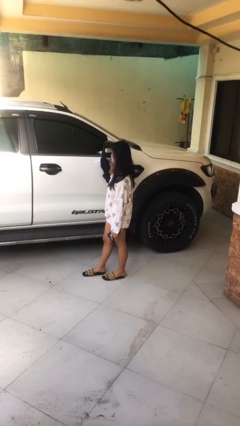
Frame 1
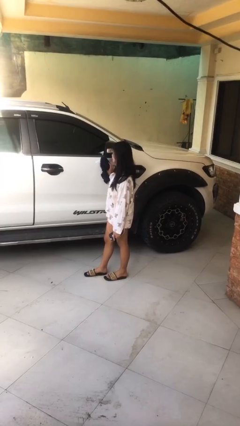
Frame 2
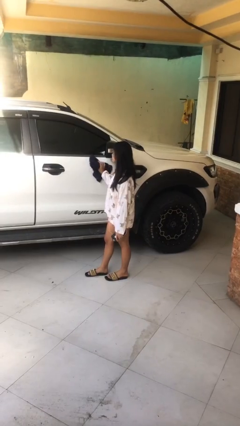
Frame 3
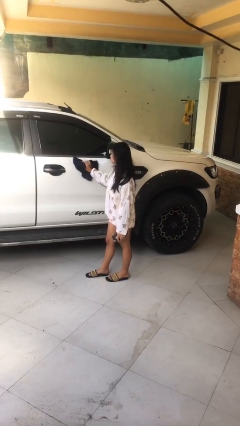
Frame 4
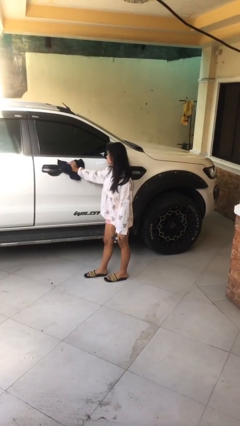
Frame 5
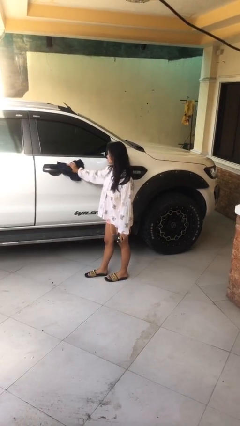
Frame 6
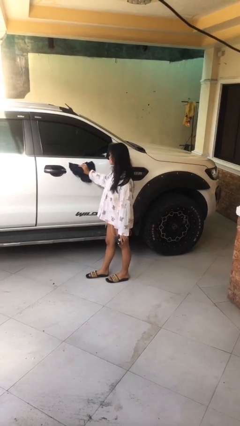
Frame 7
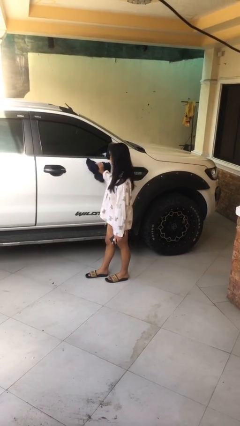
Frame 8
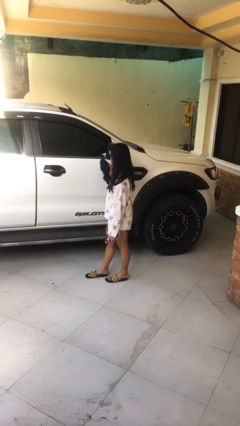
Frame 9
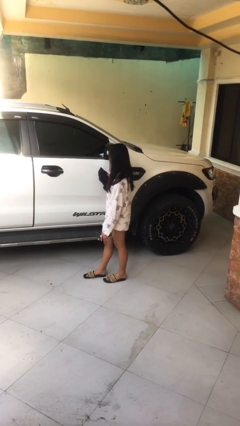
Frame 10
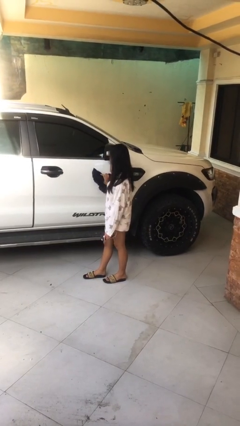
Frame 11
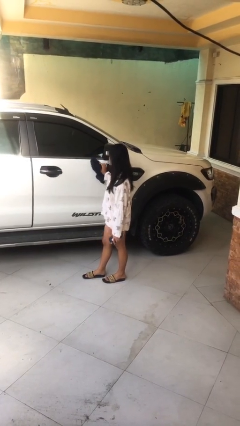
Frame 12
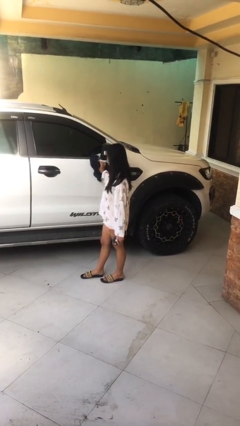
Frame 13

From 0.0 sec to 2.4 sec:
person polishes car with rag

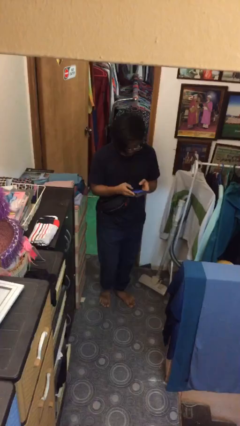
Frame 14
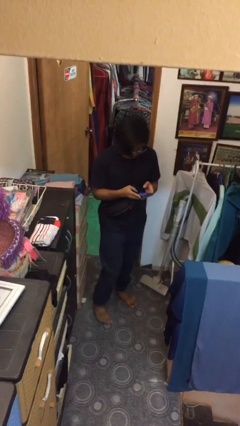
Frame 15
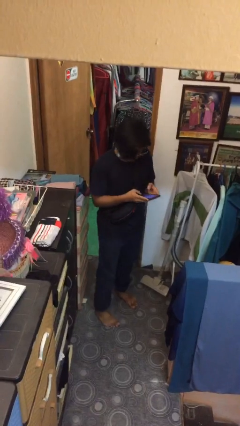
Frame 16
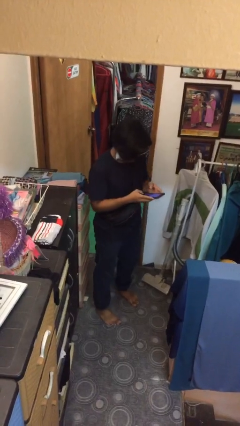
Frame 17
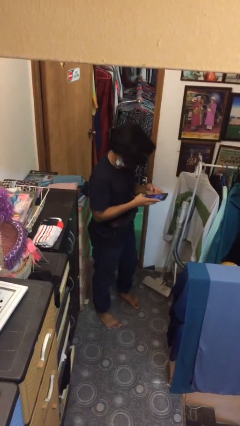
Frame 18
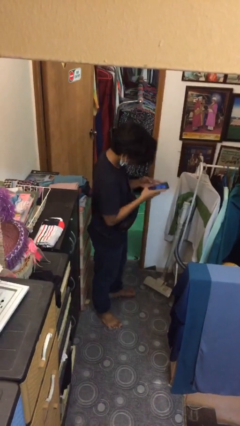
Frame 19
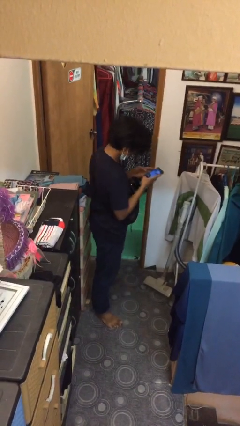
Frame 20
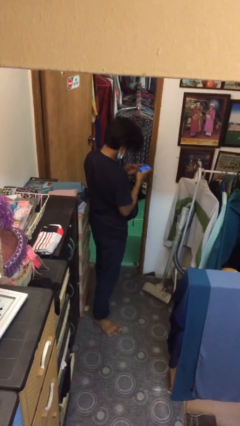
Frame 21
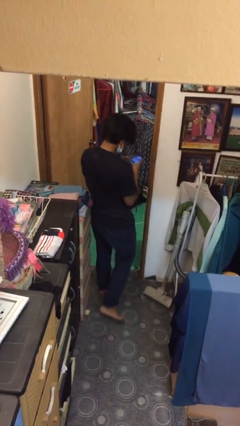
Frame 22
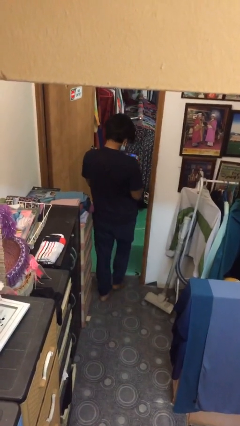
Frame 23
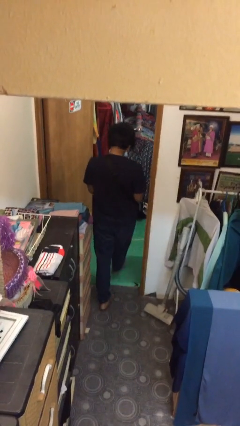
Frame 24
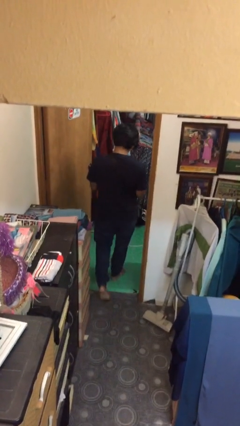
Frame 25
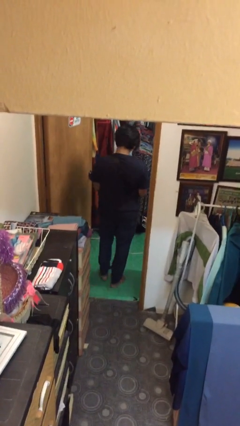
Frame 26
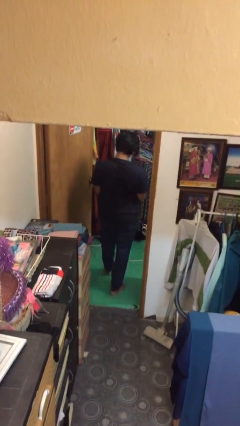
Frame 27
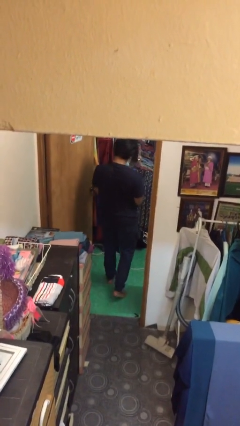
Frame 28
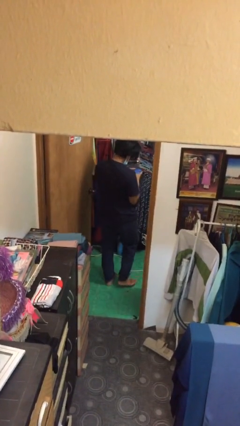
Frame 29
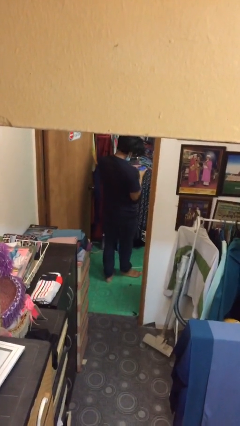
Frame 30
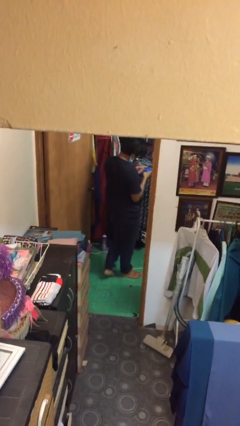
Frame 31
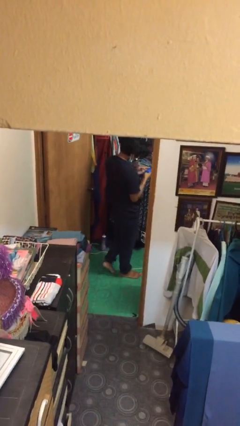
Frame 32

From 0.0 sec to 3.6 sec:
person exits scene through structure

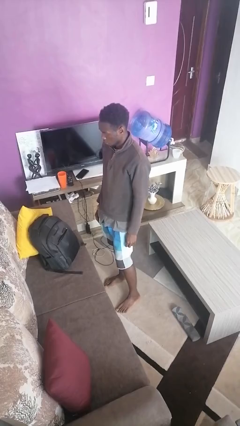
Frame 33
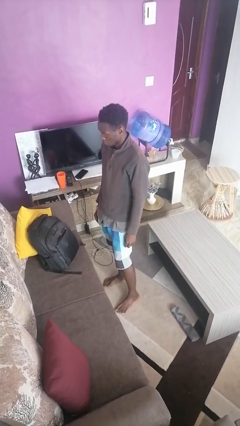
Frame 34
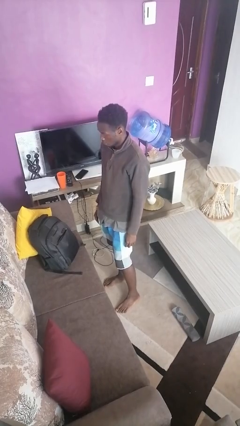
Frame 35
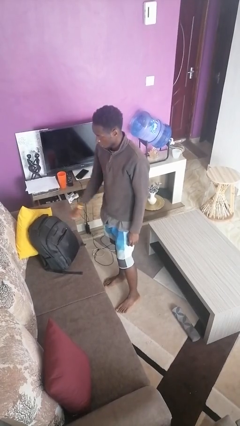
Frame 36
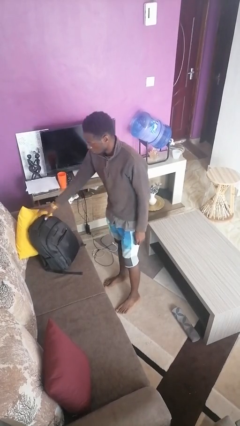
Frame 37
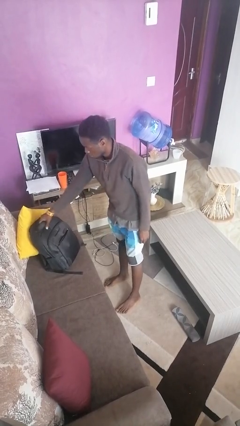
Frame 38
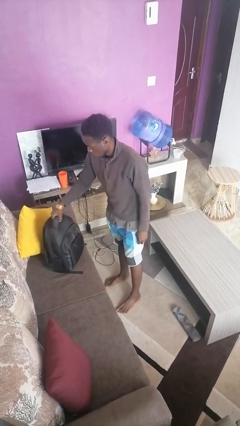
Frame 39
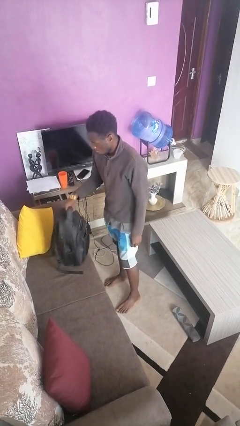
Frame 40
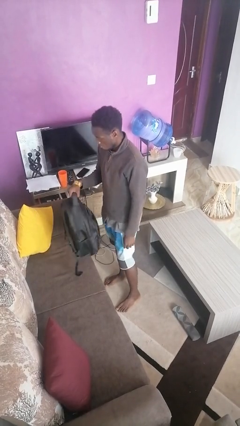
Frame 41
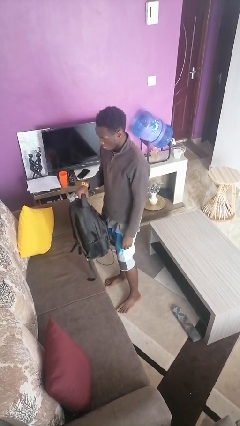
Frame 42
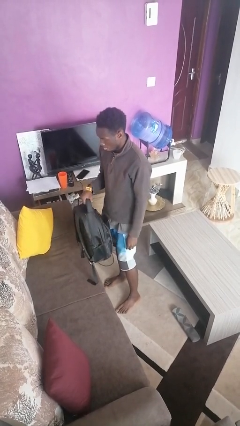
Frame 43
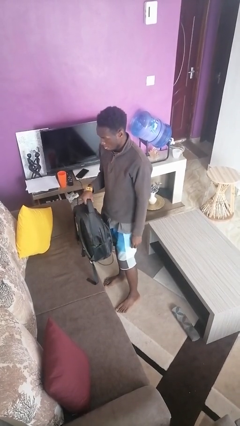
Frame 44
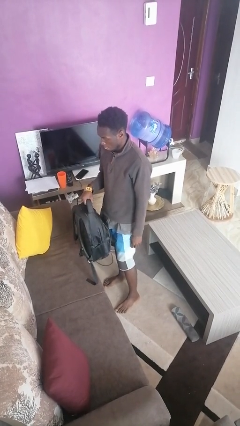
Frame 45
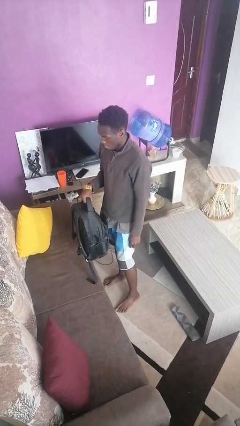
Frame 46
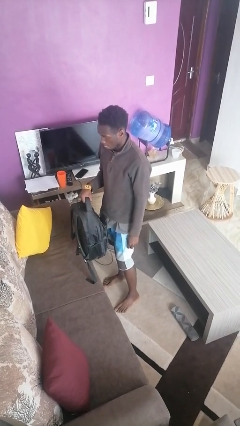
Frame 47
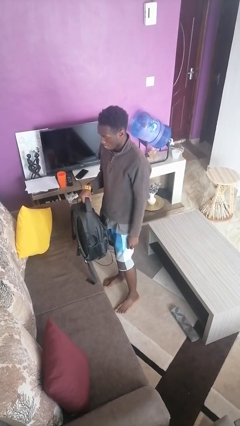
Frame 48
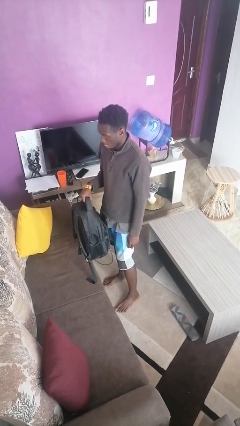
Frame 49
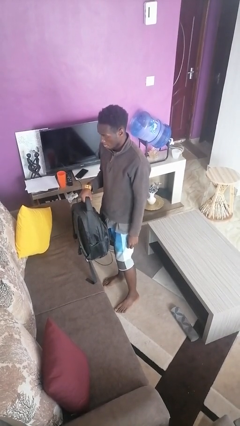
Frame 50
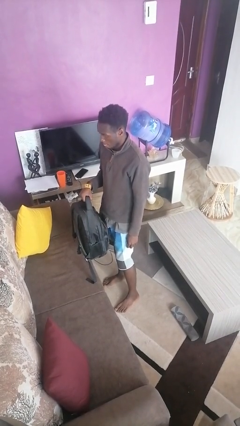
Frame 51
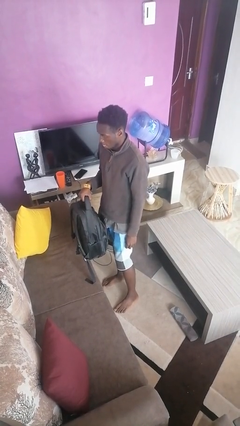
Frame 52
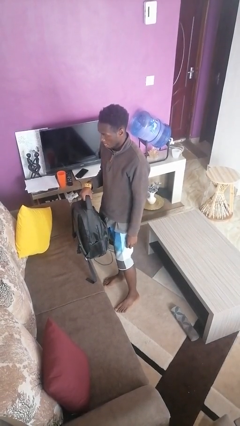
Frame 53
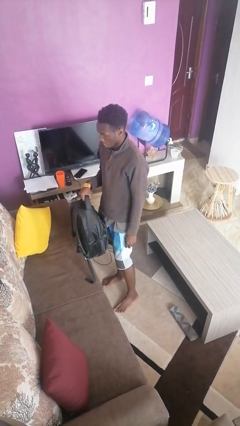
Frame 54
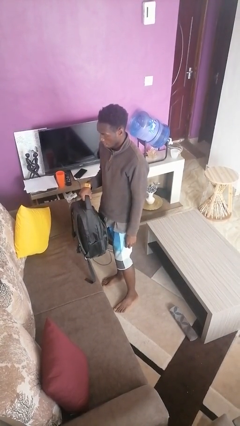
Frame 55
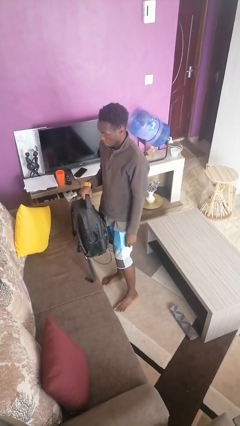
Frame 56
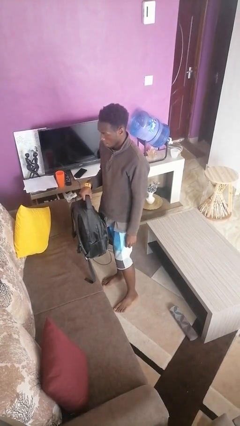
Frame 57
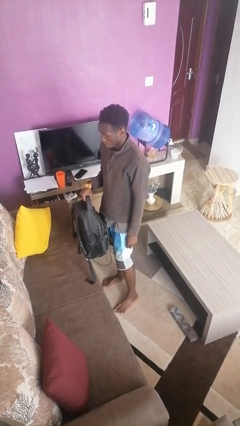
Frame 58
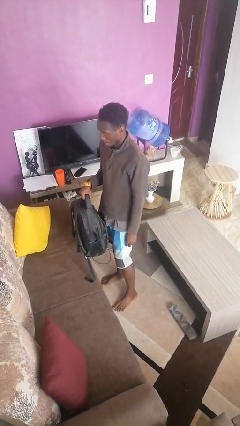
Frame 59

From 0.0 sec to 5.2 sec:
person picks up object from couch

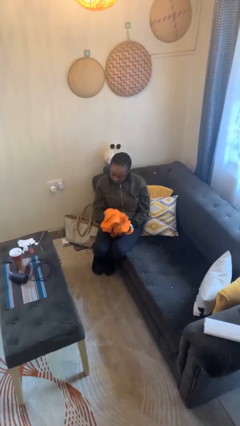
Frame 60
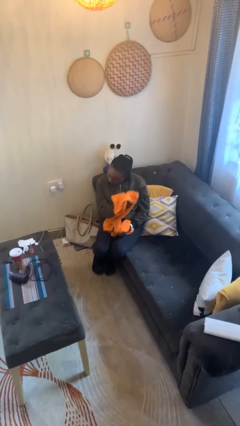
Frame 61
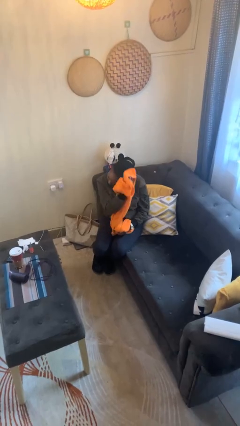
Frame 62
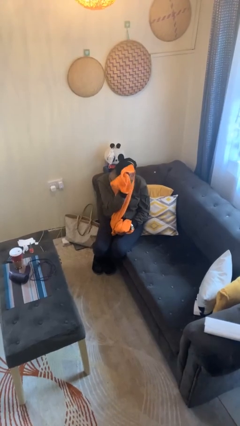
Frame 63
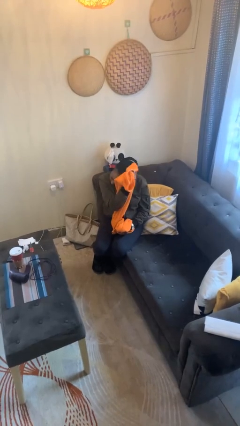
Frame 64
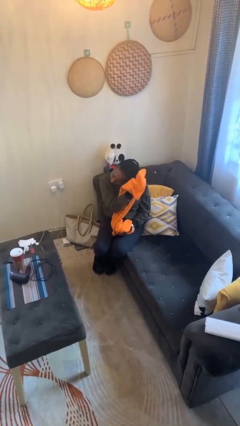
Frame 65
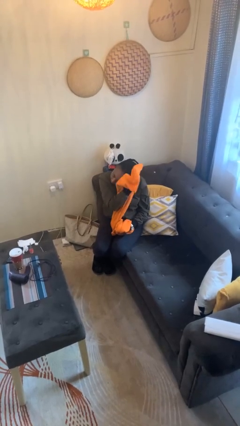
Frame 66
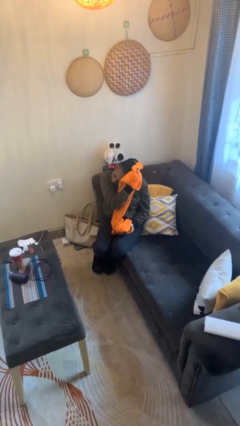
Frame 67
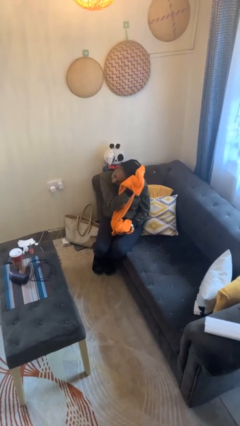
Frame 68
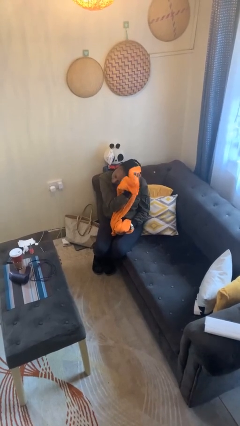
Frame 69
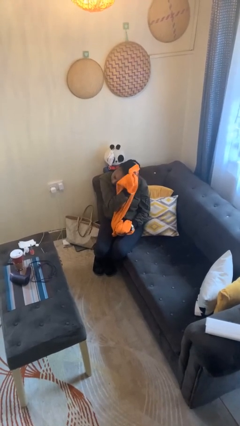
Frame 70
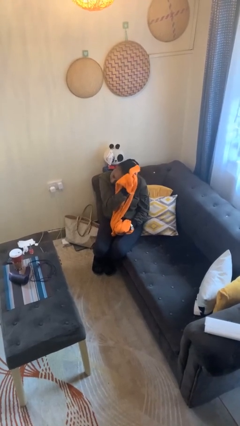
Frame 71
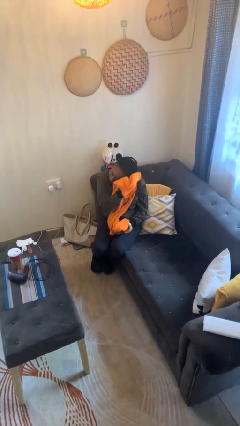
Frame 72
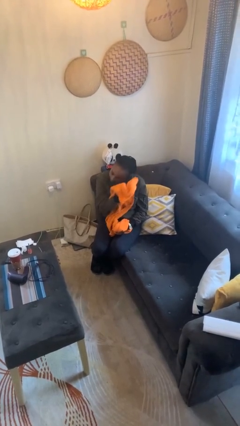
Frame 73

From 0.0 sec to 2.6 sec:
person dries hair with towel

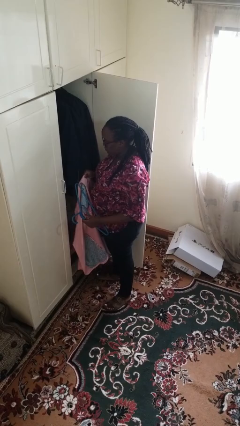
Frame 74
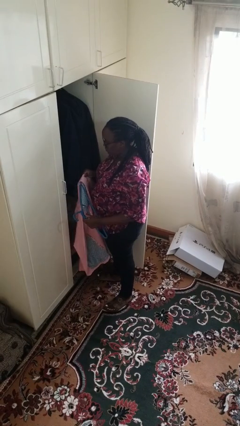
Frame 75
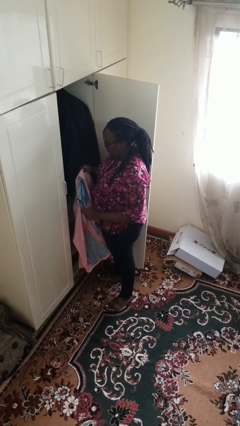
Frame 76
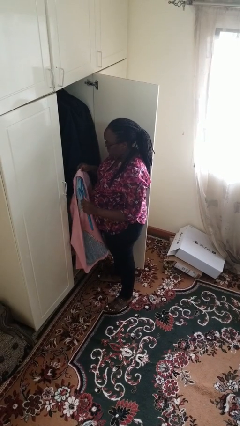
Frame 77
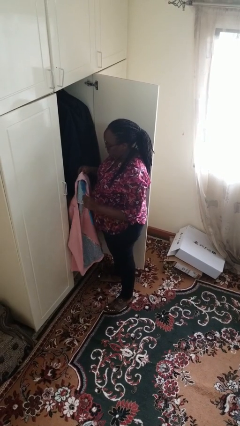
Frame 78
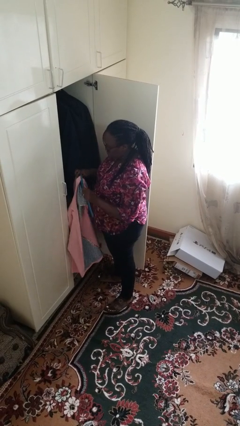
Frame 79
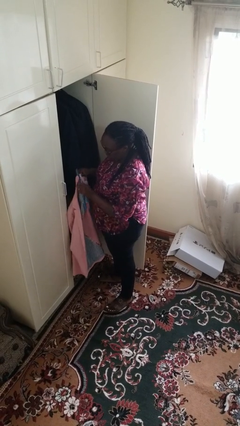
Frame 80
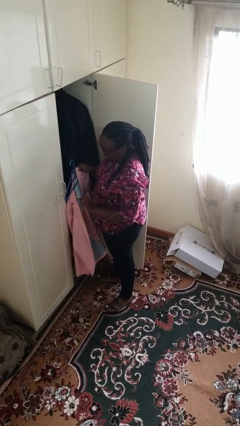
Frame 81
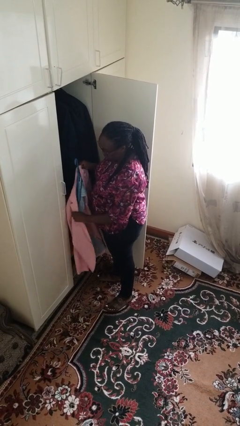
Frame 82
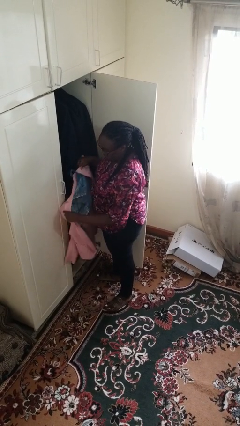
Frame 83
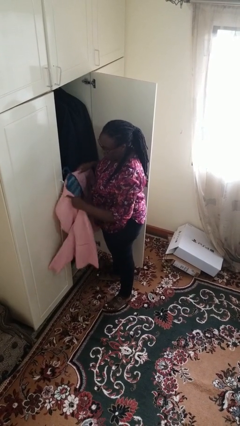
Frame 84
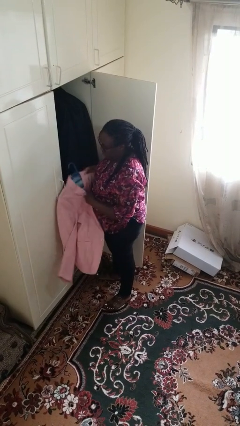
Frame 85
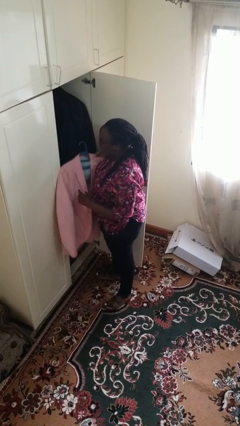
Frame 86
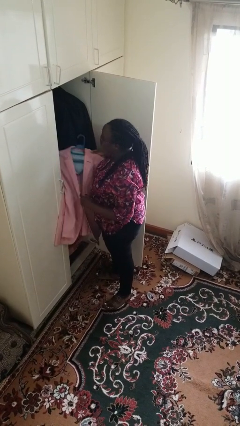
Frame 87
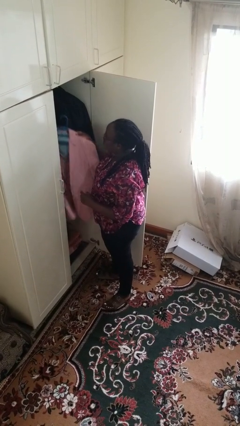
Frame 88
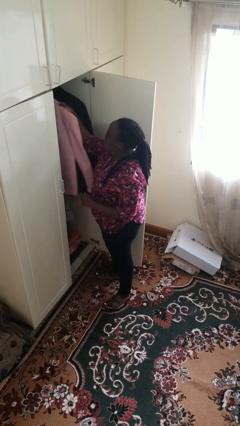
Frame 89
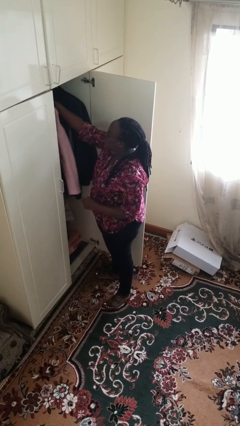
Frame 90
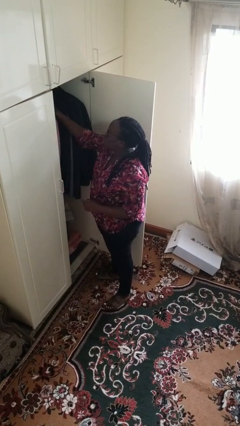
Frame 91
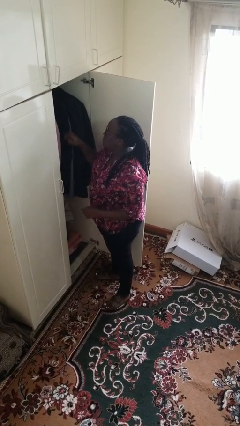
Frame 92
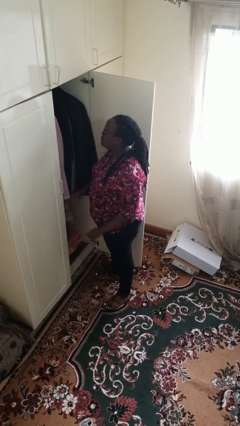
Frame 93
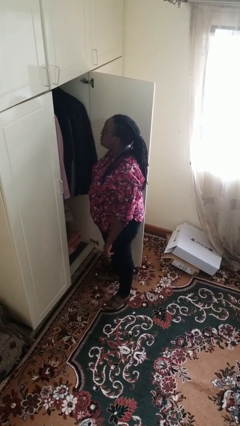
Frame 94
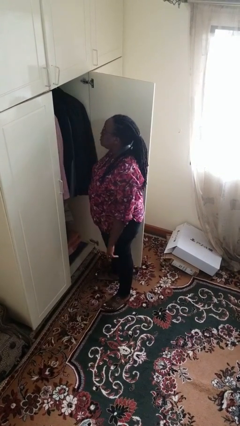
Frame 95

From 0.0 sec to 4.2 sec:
person puts clothes into closet
